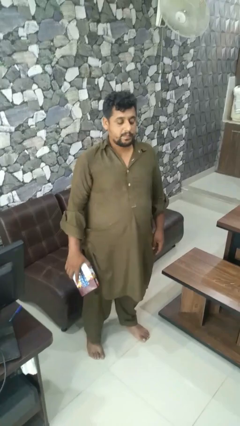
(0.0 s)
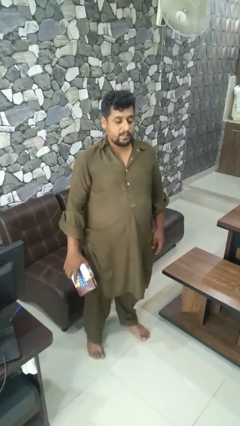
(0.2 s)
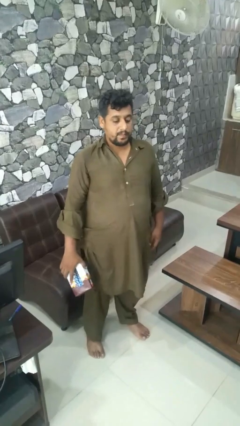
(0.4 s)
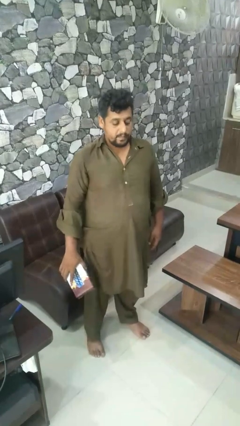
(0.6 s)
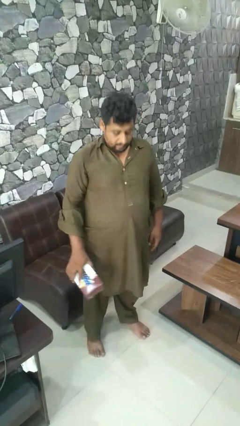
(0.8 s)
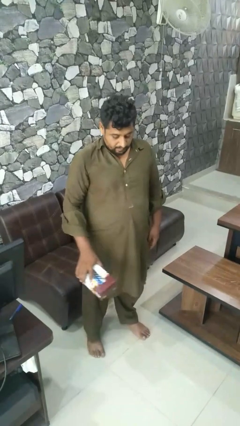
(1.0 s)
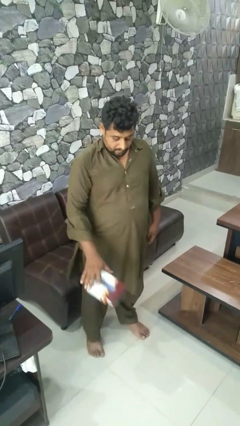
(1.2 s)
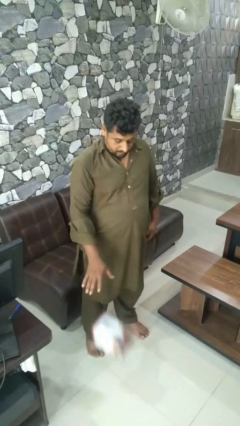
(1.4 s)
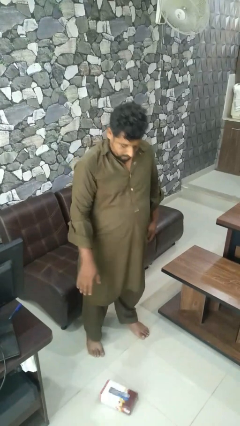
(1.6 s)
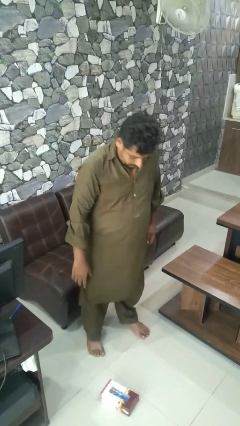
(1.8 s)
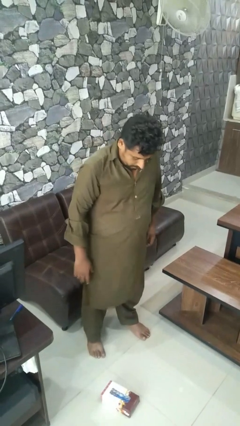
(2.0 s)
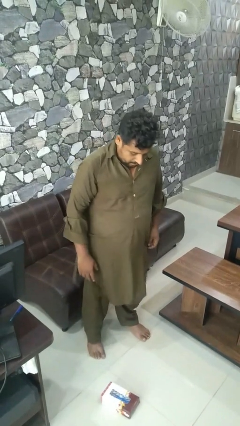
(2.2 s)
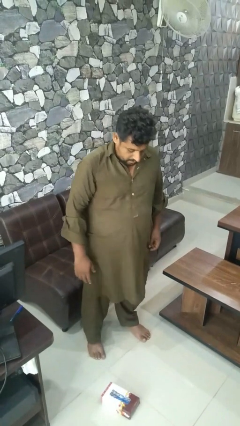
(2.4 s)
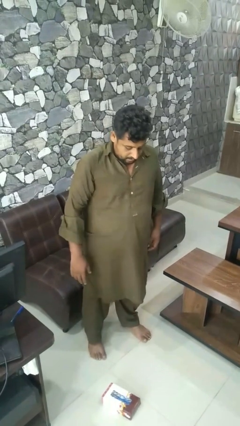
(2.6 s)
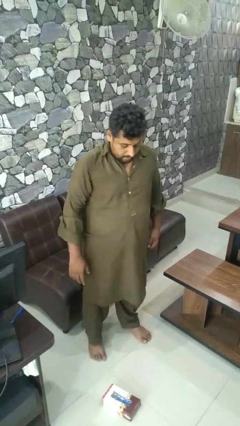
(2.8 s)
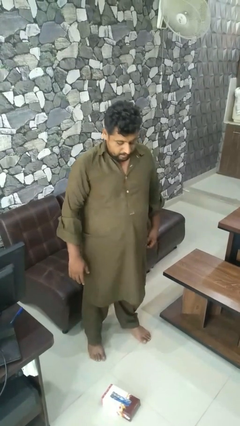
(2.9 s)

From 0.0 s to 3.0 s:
person throws object to ground

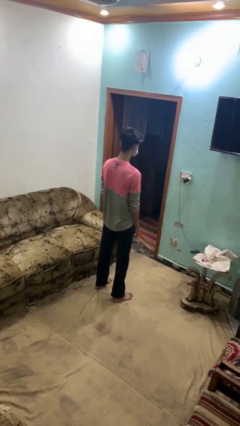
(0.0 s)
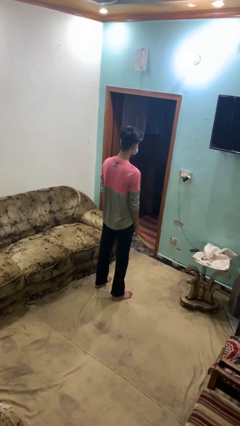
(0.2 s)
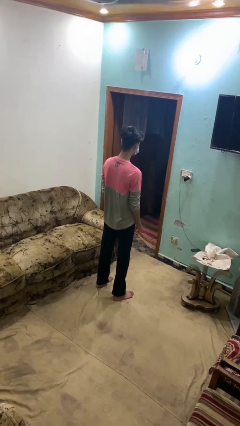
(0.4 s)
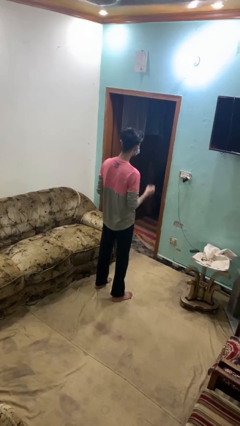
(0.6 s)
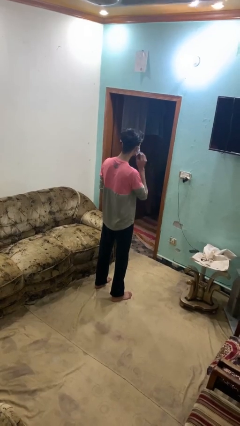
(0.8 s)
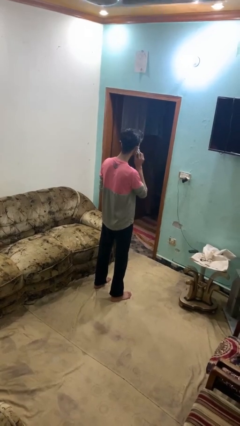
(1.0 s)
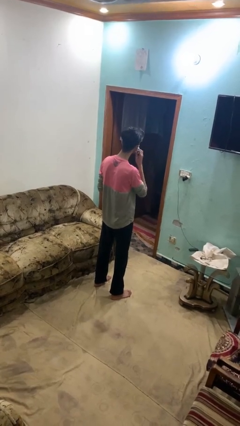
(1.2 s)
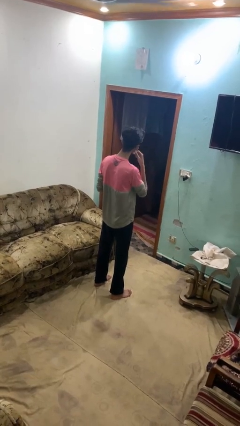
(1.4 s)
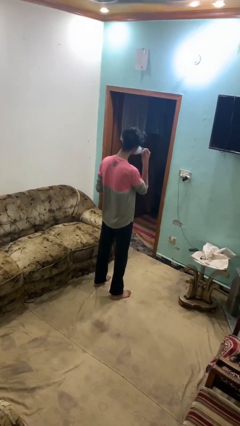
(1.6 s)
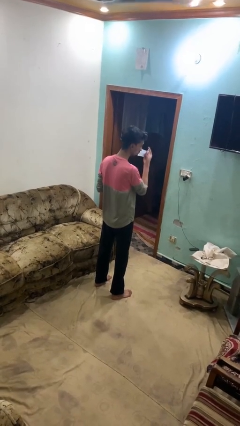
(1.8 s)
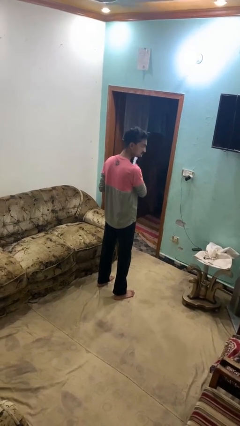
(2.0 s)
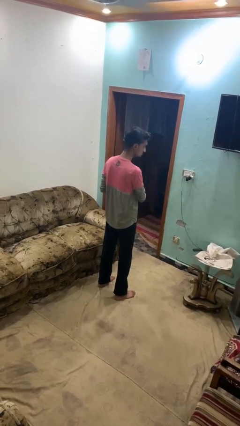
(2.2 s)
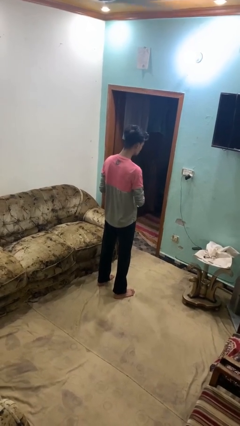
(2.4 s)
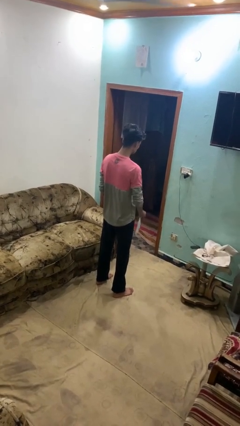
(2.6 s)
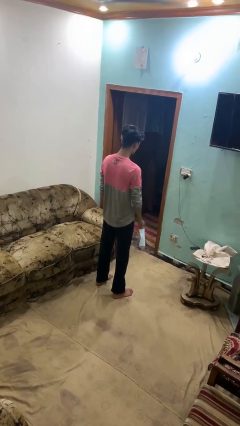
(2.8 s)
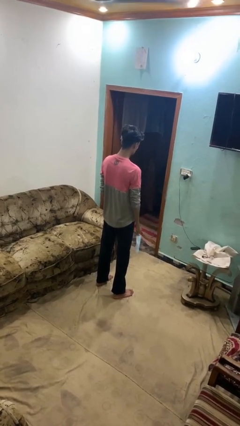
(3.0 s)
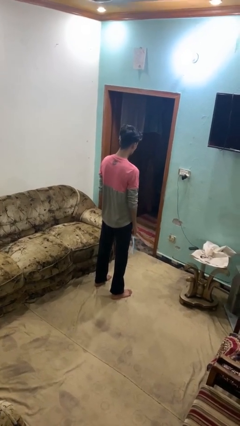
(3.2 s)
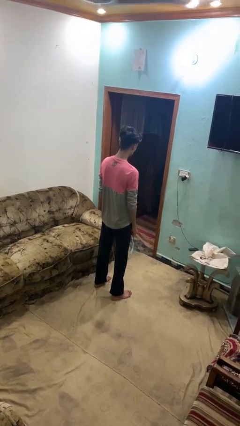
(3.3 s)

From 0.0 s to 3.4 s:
person takes off facemask

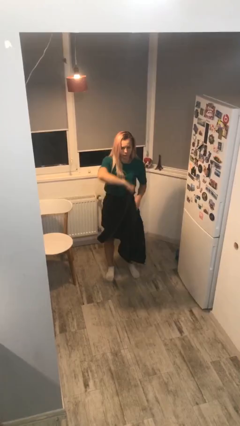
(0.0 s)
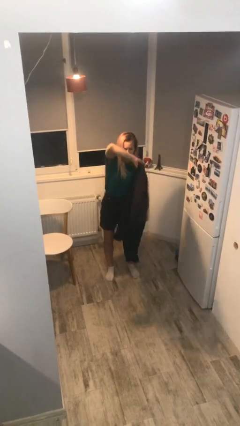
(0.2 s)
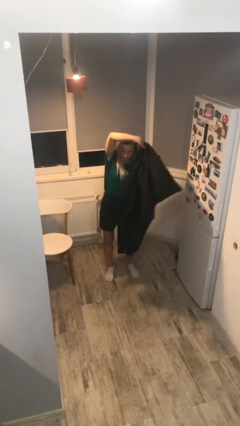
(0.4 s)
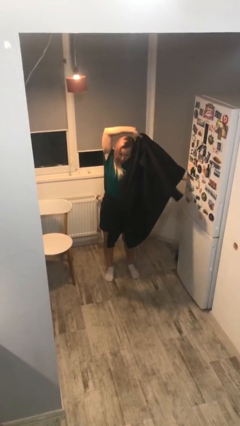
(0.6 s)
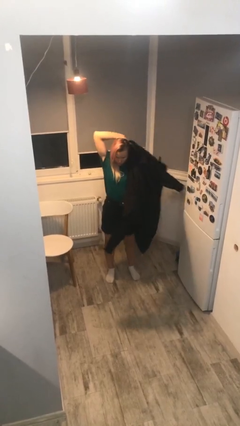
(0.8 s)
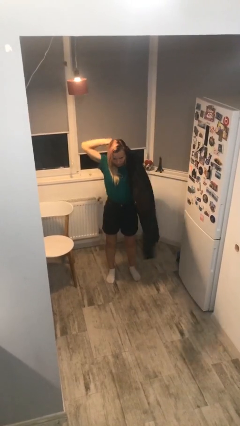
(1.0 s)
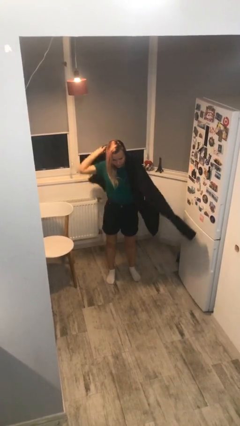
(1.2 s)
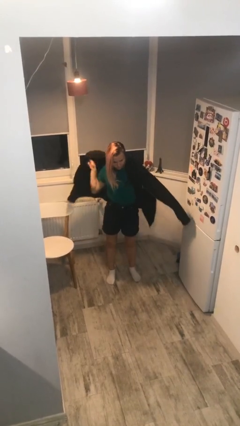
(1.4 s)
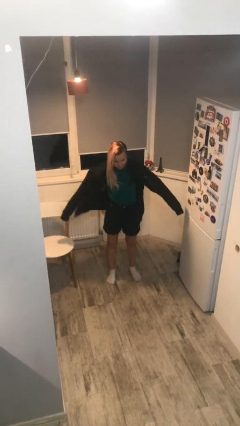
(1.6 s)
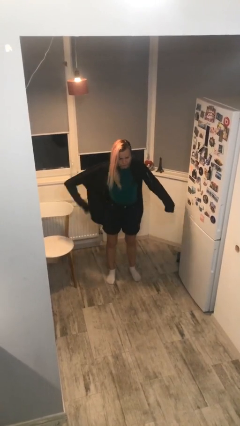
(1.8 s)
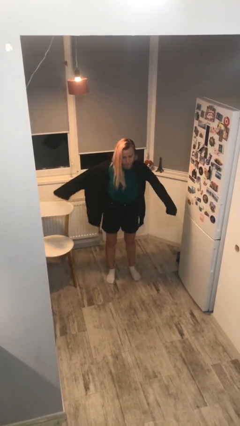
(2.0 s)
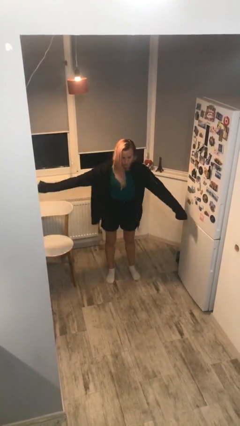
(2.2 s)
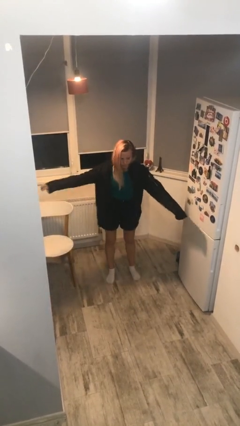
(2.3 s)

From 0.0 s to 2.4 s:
person puts on jacket

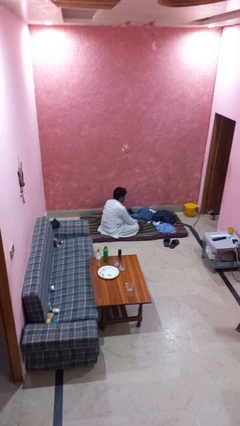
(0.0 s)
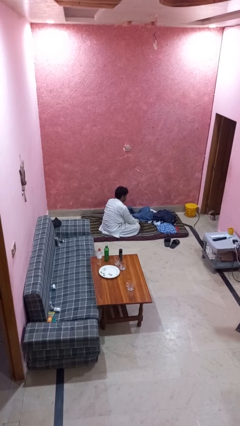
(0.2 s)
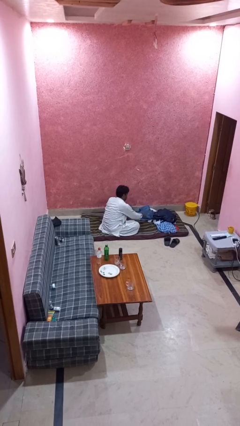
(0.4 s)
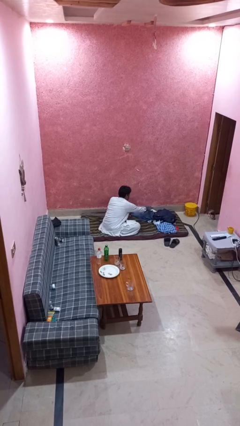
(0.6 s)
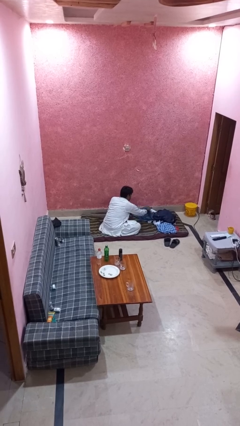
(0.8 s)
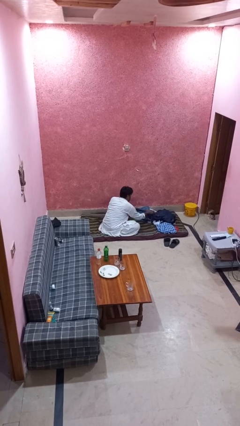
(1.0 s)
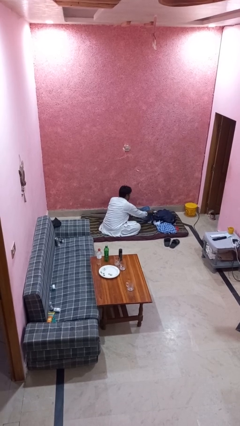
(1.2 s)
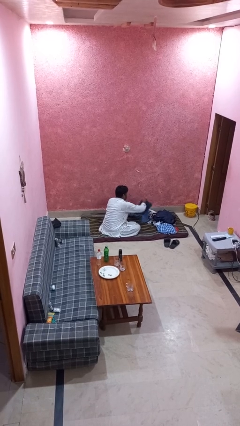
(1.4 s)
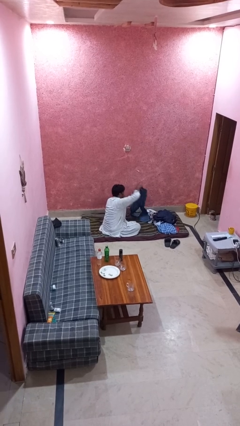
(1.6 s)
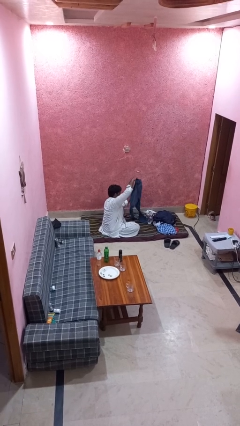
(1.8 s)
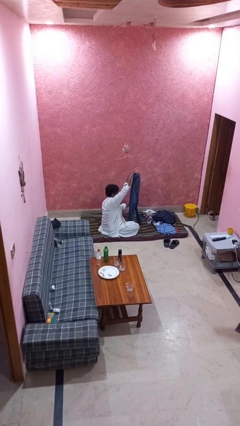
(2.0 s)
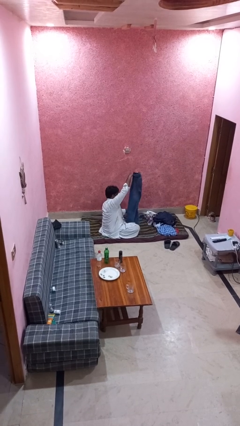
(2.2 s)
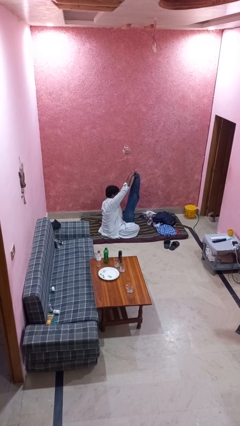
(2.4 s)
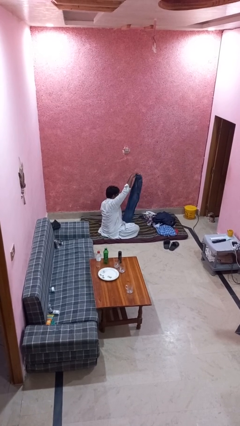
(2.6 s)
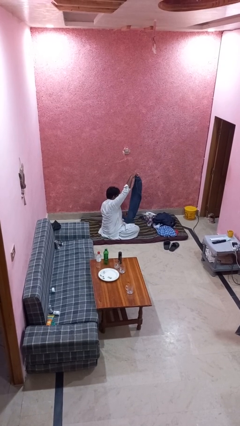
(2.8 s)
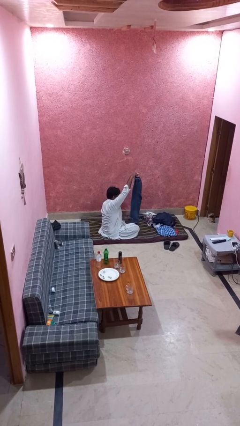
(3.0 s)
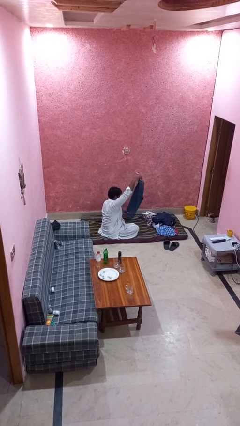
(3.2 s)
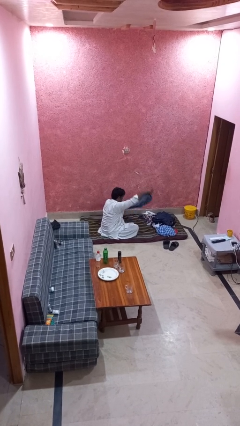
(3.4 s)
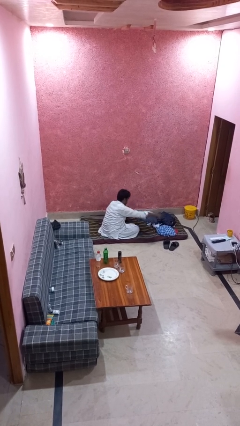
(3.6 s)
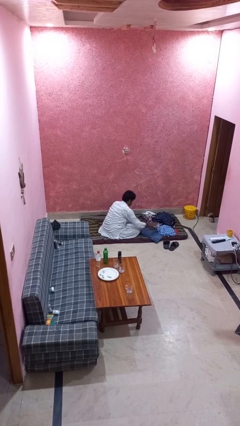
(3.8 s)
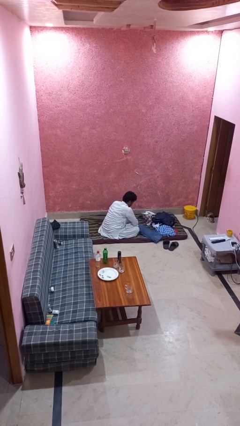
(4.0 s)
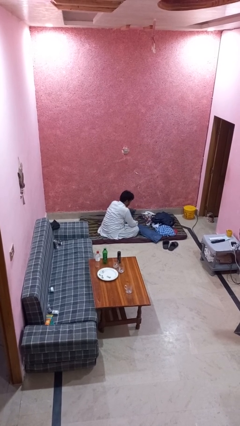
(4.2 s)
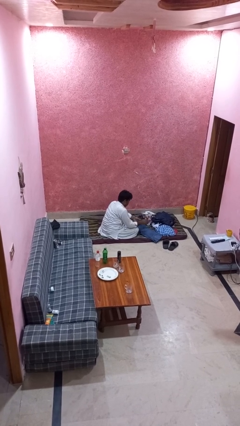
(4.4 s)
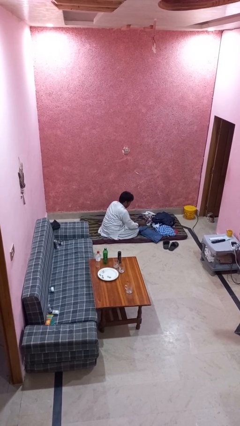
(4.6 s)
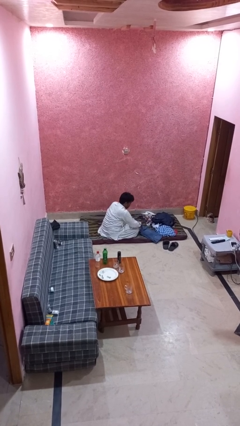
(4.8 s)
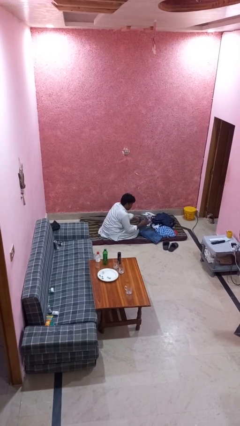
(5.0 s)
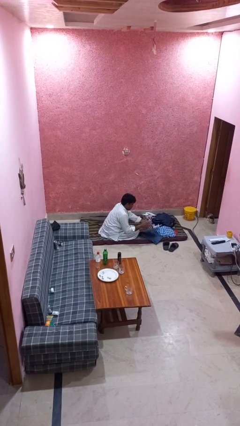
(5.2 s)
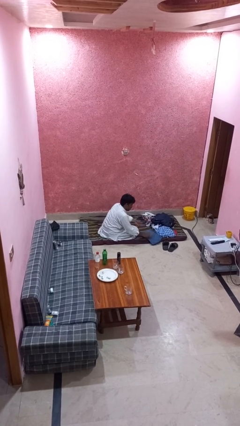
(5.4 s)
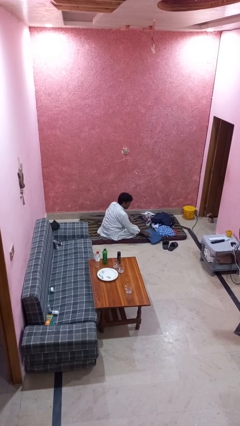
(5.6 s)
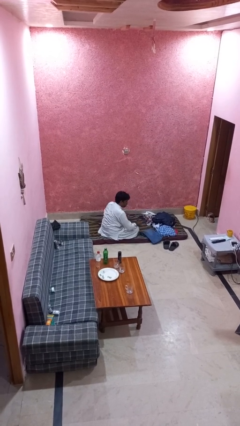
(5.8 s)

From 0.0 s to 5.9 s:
person folds pants

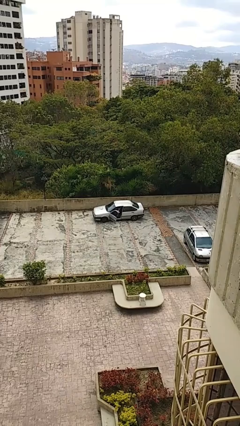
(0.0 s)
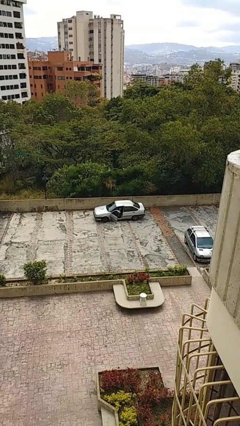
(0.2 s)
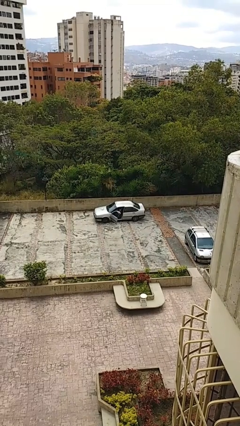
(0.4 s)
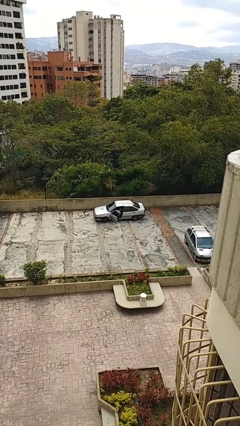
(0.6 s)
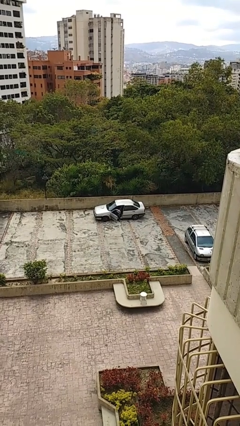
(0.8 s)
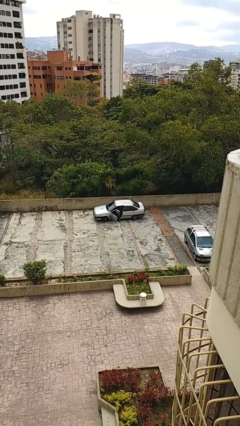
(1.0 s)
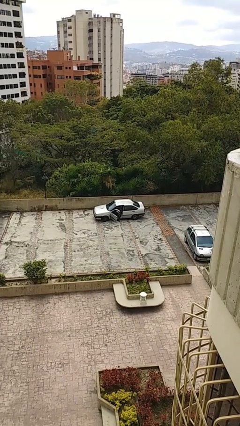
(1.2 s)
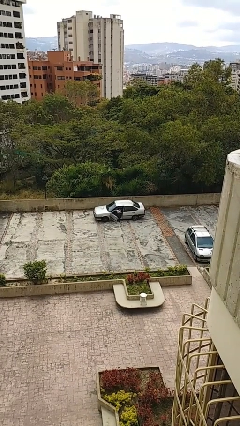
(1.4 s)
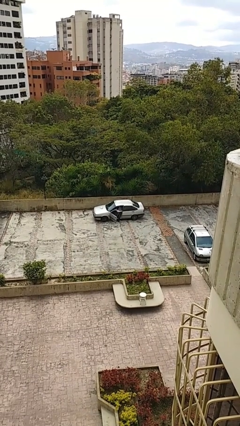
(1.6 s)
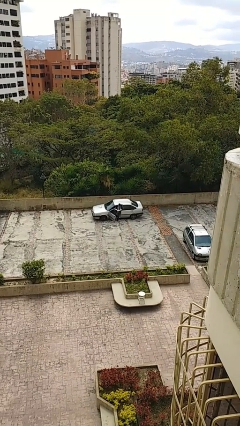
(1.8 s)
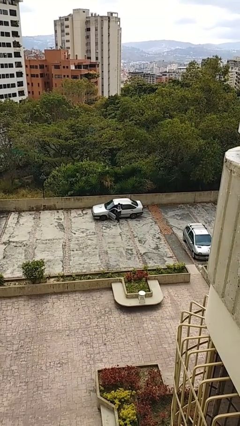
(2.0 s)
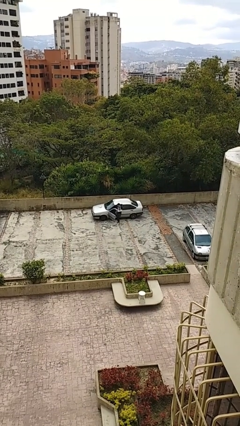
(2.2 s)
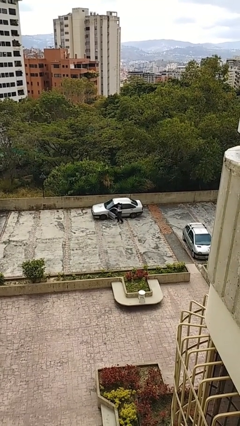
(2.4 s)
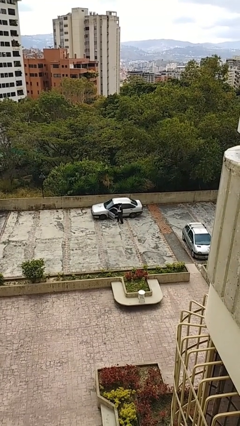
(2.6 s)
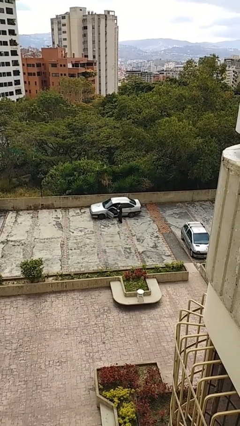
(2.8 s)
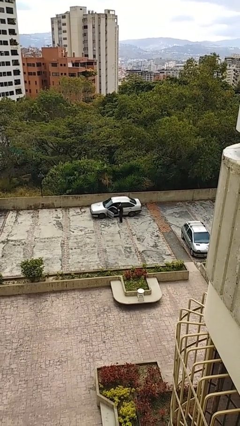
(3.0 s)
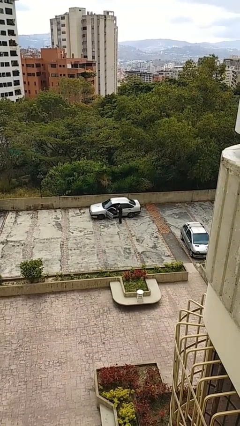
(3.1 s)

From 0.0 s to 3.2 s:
person exits car
